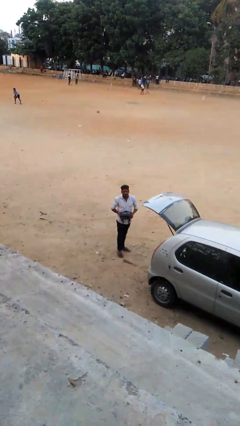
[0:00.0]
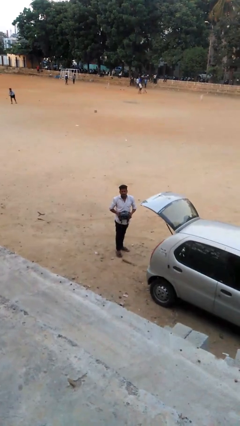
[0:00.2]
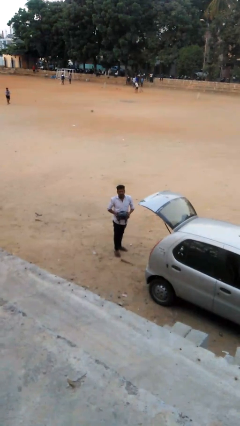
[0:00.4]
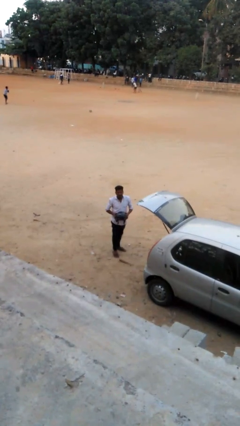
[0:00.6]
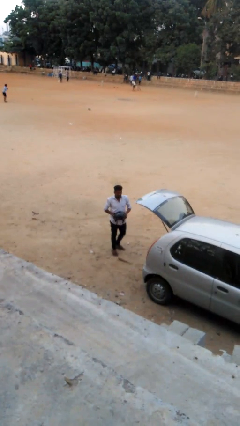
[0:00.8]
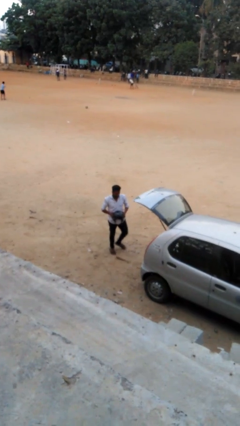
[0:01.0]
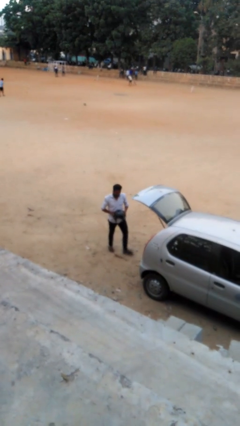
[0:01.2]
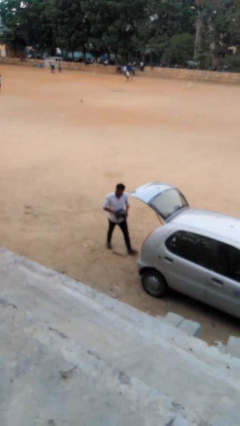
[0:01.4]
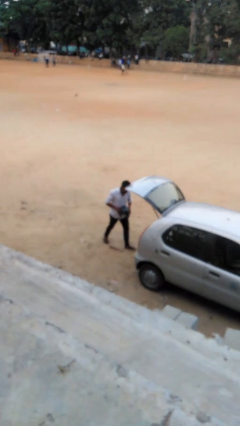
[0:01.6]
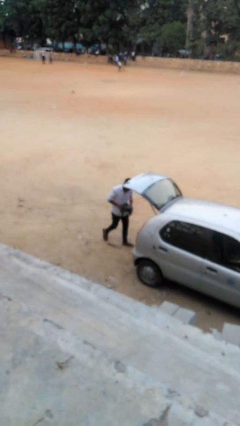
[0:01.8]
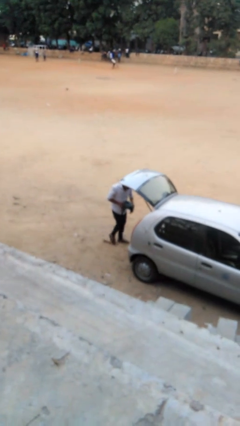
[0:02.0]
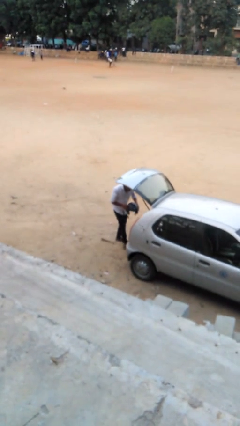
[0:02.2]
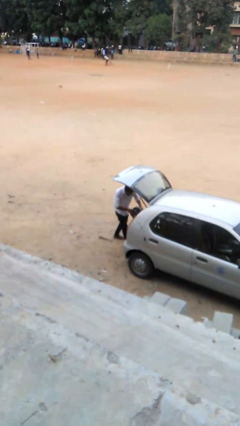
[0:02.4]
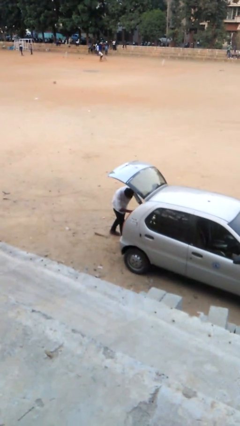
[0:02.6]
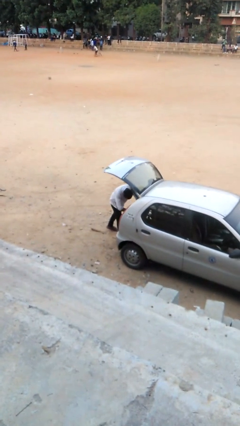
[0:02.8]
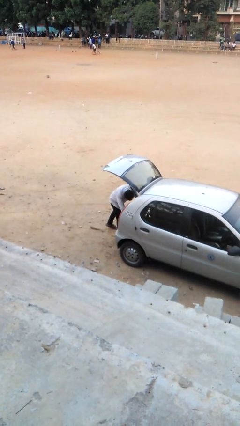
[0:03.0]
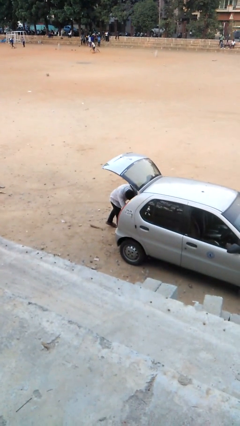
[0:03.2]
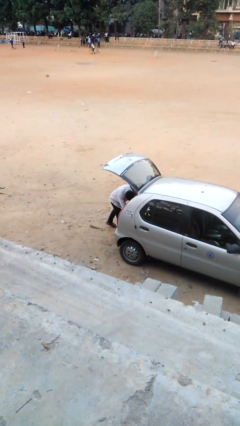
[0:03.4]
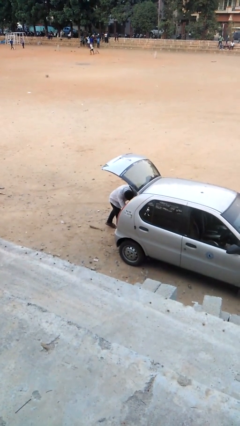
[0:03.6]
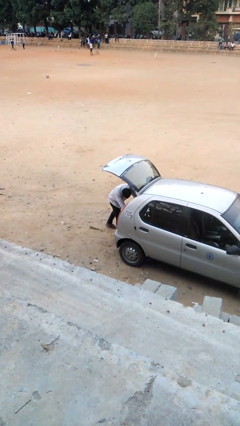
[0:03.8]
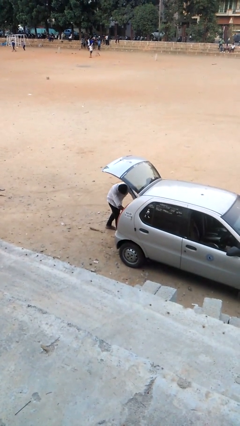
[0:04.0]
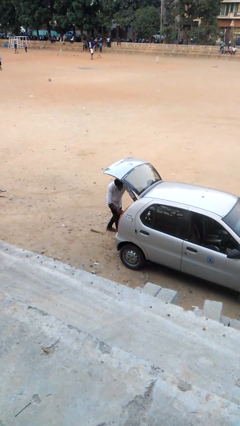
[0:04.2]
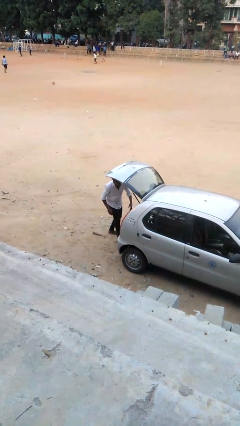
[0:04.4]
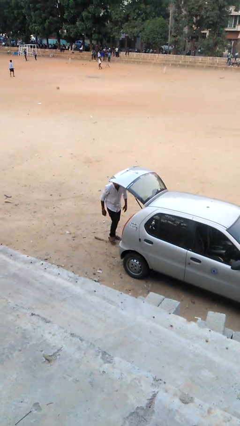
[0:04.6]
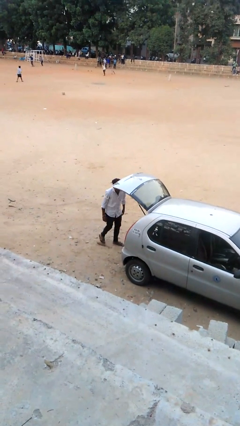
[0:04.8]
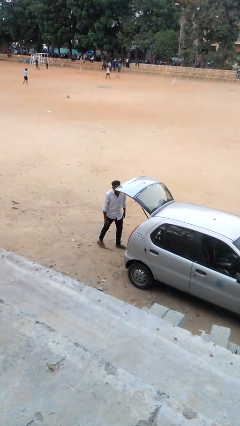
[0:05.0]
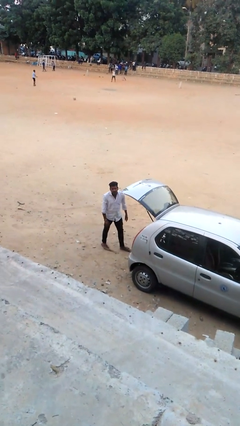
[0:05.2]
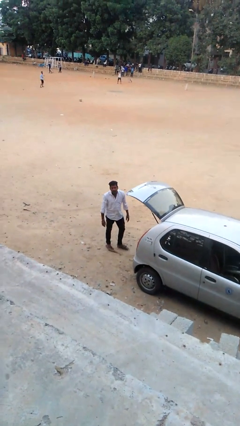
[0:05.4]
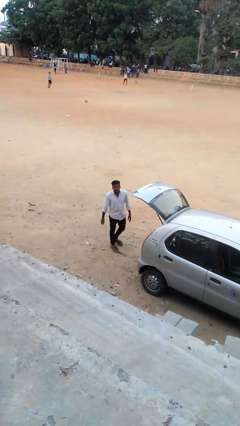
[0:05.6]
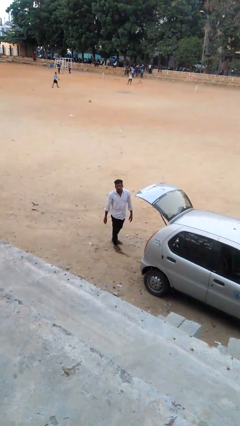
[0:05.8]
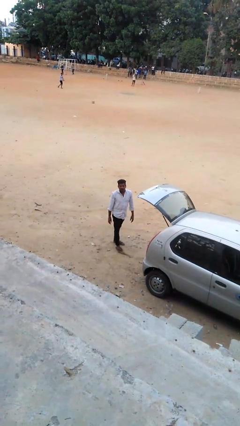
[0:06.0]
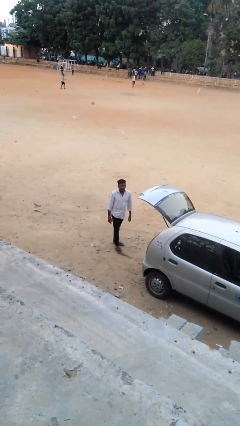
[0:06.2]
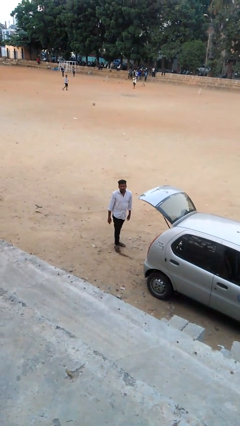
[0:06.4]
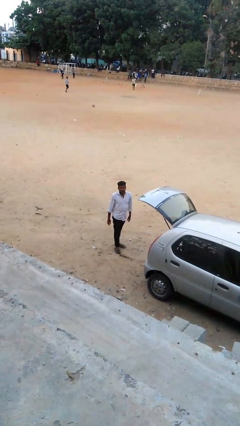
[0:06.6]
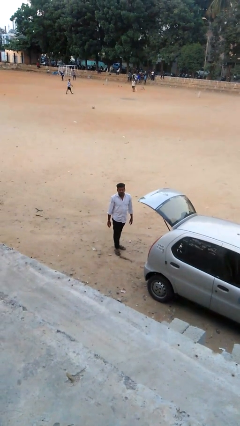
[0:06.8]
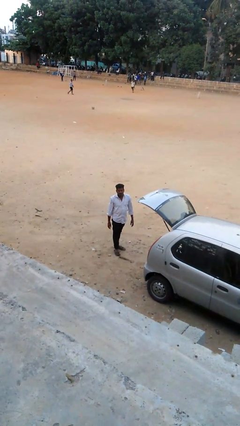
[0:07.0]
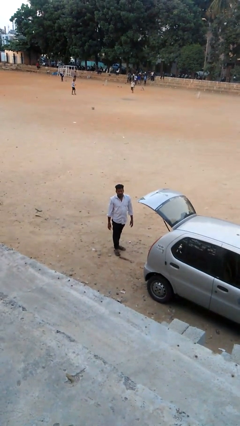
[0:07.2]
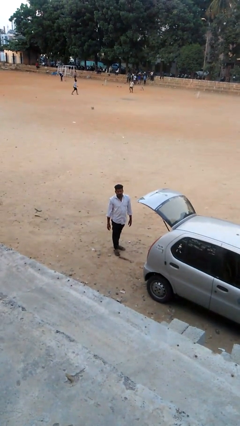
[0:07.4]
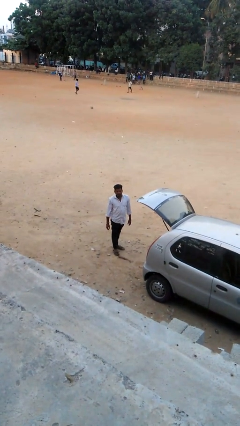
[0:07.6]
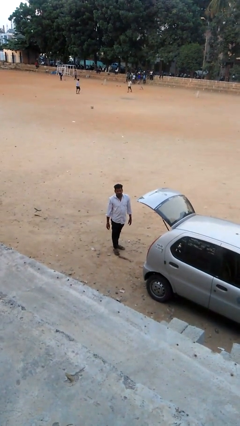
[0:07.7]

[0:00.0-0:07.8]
person loads car

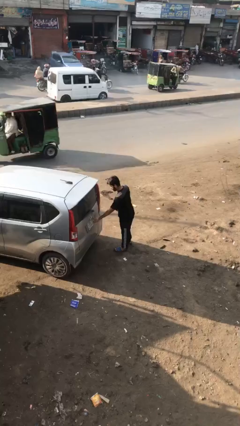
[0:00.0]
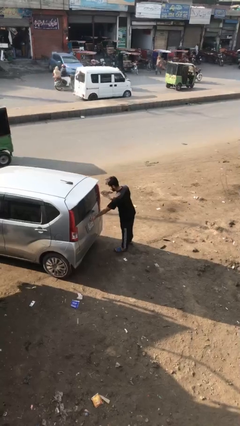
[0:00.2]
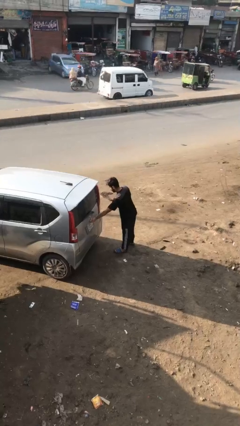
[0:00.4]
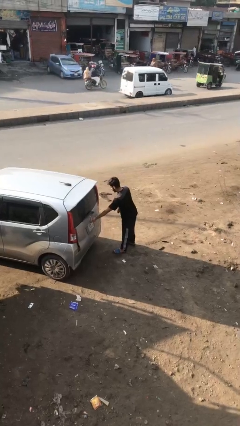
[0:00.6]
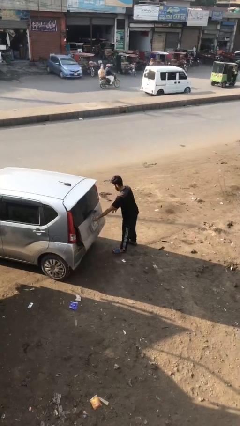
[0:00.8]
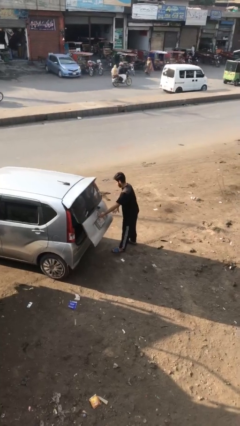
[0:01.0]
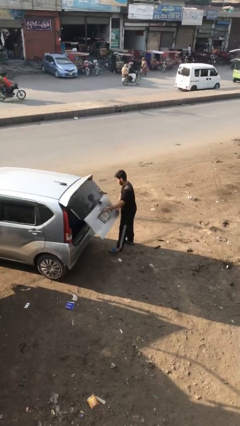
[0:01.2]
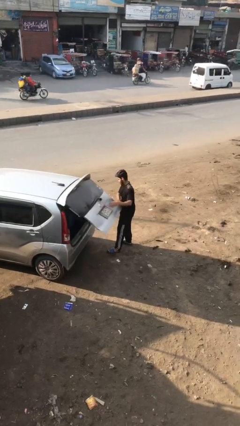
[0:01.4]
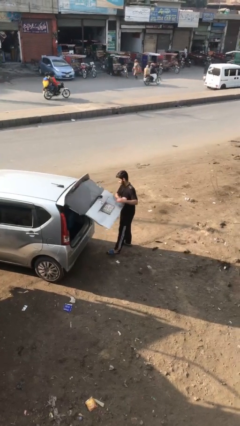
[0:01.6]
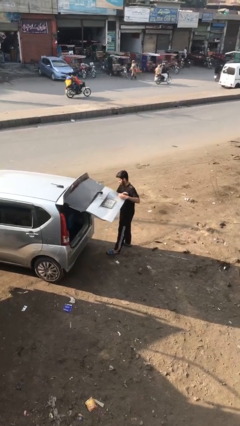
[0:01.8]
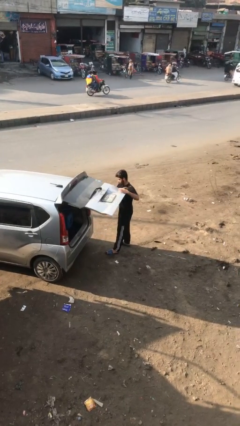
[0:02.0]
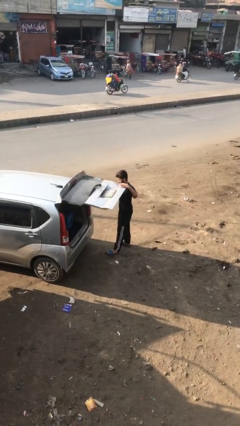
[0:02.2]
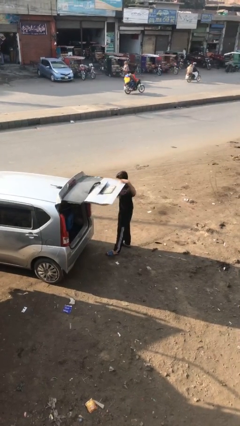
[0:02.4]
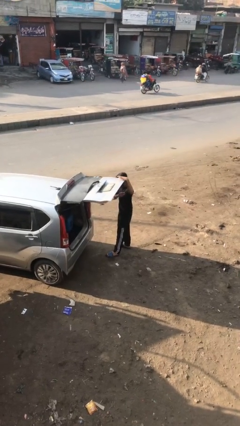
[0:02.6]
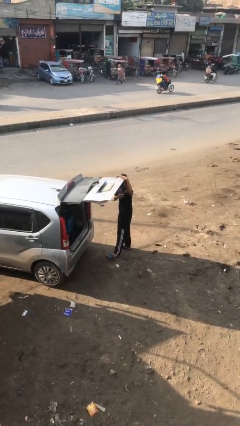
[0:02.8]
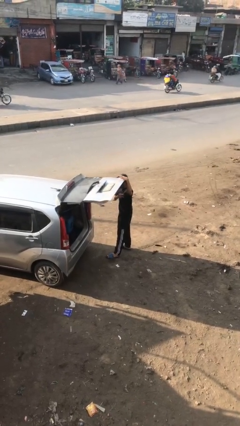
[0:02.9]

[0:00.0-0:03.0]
person opens car trunk

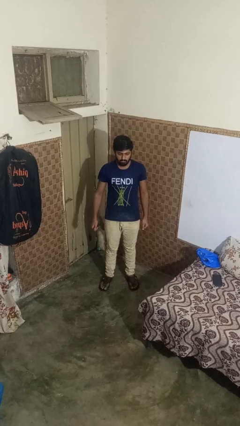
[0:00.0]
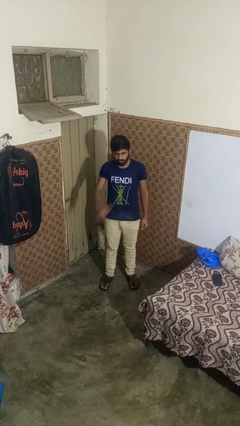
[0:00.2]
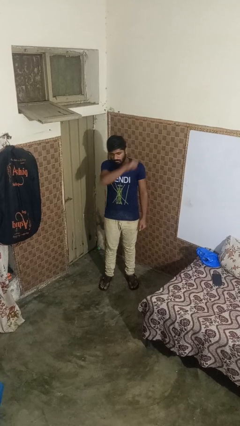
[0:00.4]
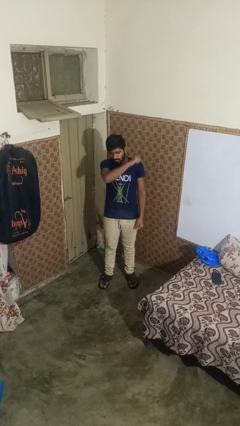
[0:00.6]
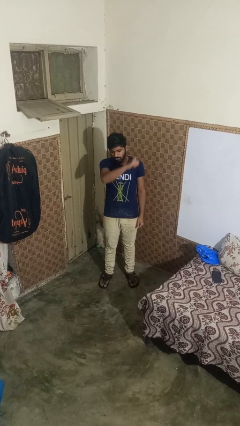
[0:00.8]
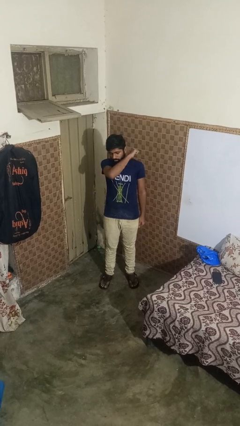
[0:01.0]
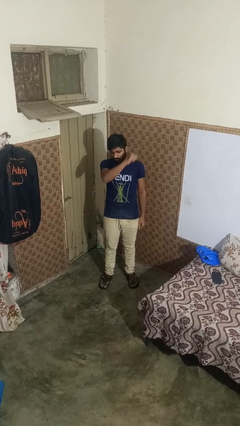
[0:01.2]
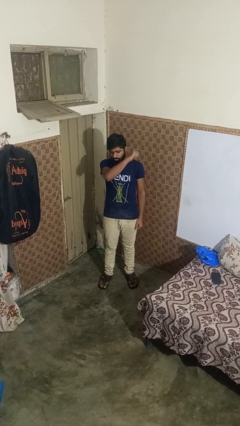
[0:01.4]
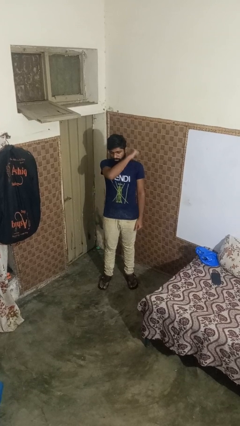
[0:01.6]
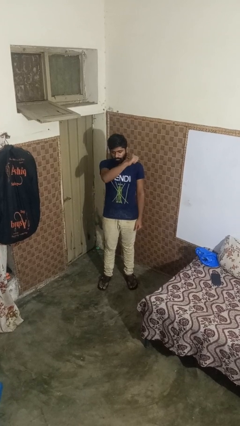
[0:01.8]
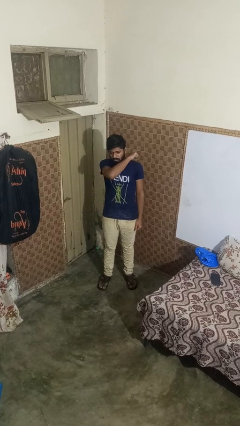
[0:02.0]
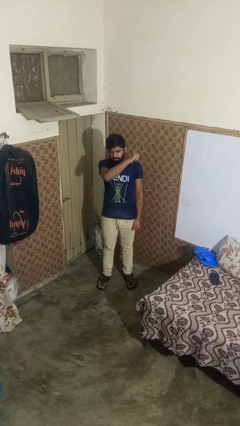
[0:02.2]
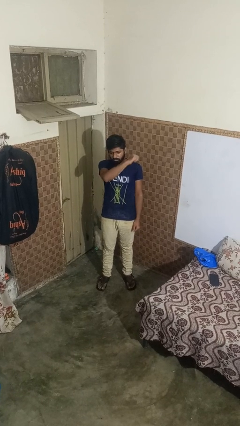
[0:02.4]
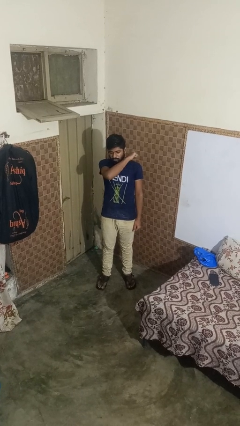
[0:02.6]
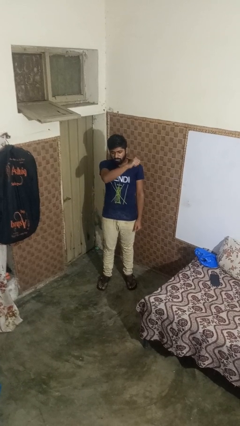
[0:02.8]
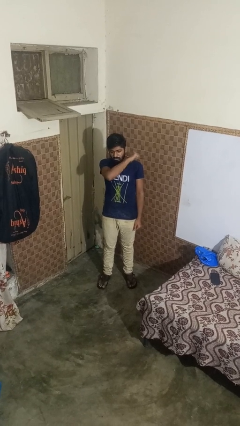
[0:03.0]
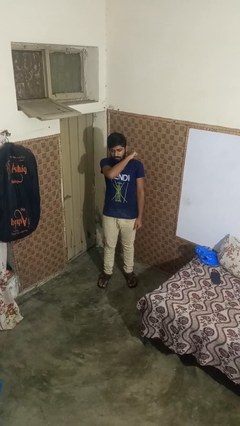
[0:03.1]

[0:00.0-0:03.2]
person gestures behind me

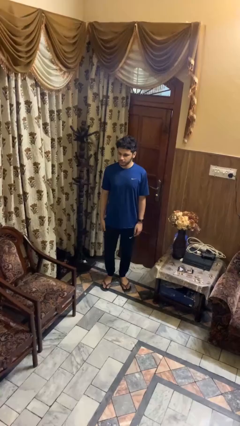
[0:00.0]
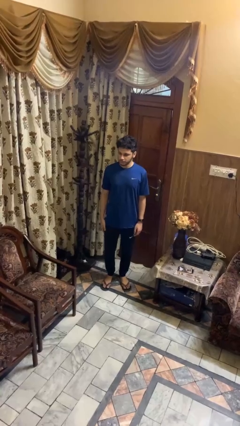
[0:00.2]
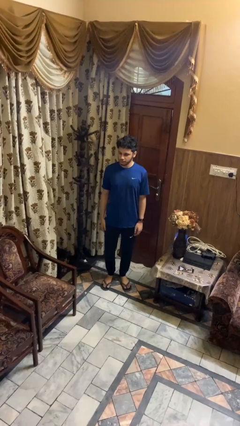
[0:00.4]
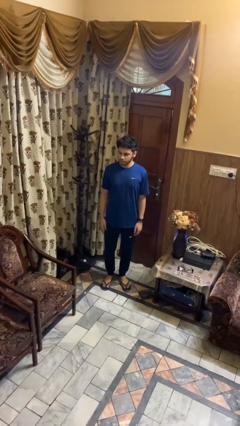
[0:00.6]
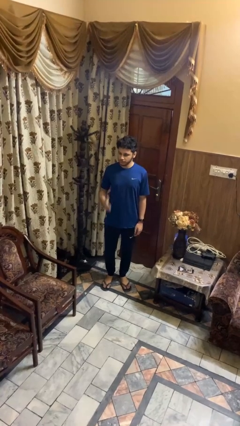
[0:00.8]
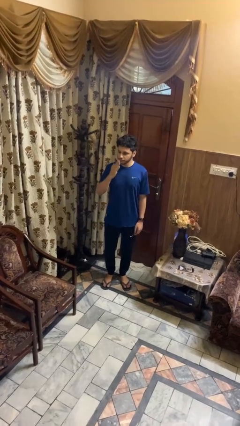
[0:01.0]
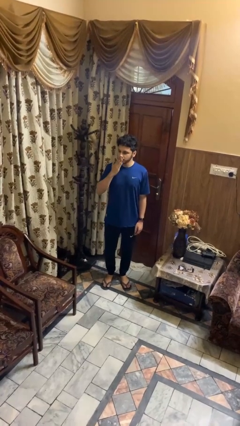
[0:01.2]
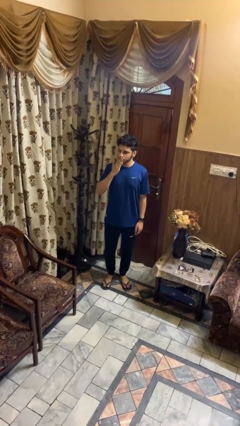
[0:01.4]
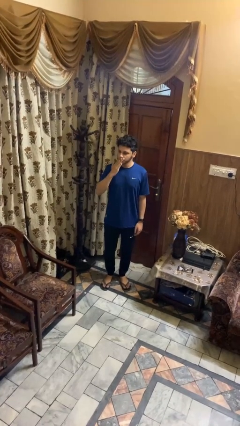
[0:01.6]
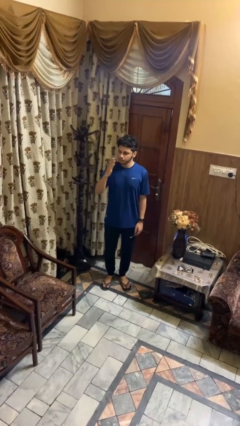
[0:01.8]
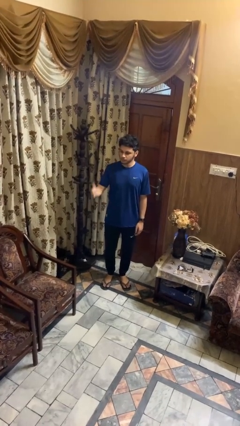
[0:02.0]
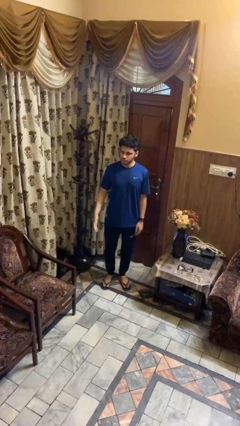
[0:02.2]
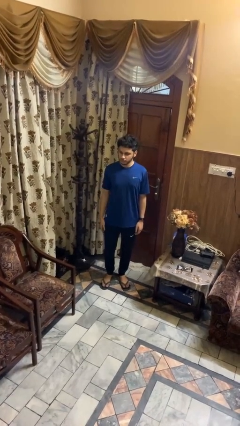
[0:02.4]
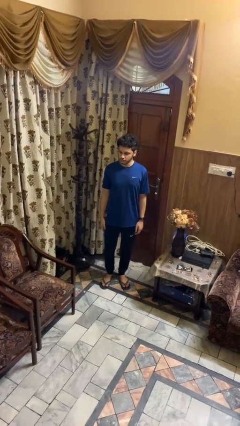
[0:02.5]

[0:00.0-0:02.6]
person gestures blow kiss

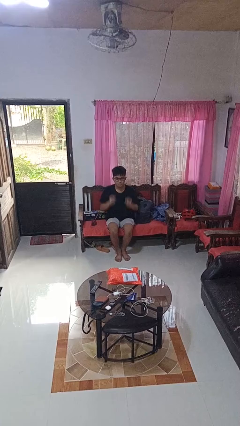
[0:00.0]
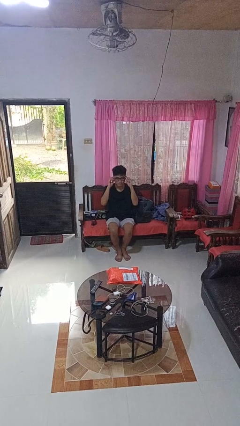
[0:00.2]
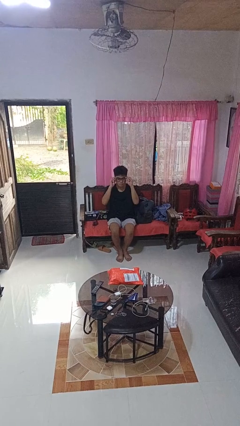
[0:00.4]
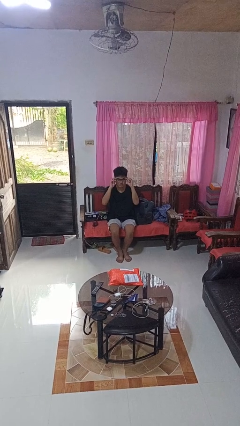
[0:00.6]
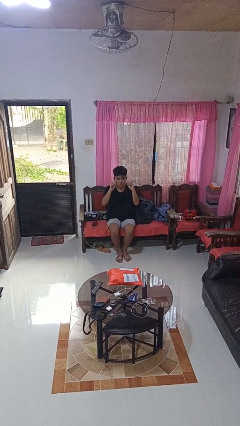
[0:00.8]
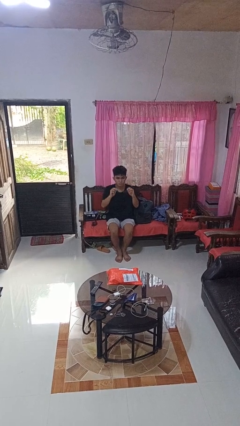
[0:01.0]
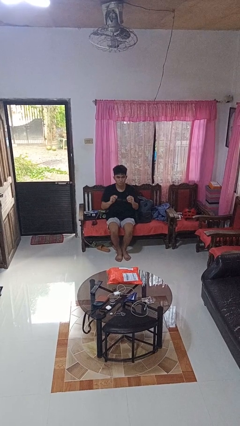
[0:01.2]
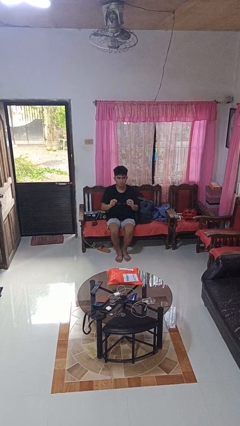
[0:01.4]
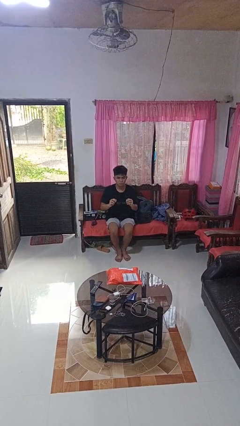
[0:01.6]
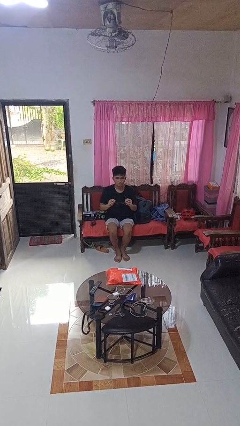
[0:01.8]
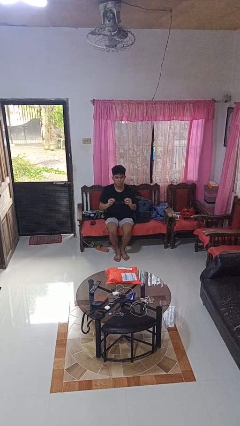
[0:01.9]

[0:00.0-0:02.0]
person takes off glasses
